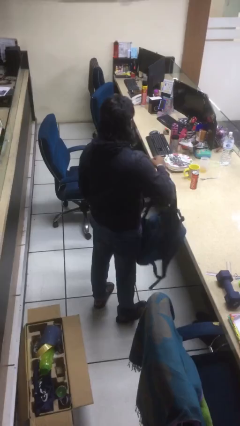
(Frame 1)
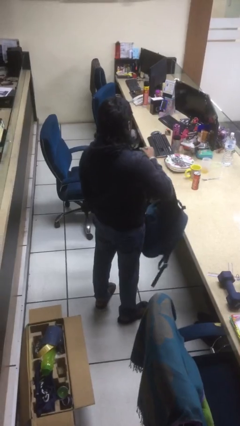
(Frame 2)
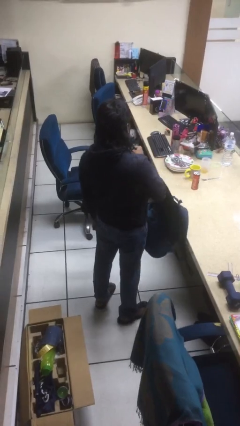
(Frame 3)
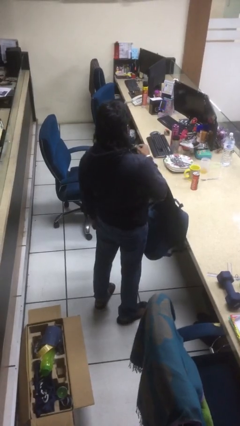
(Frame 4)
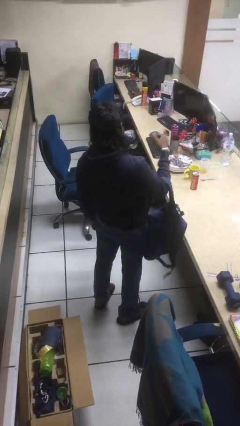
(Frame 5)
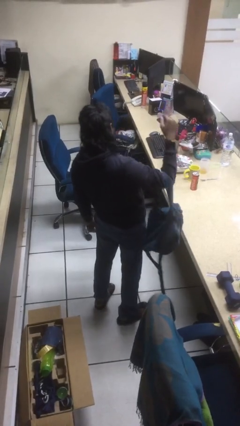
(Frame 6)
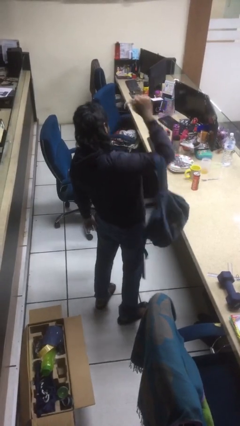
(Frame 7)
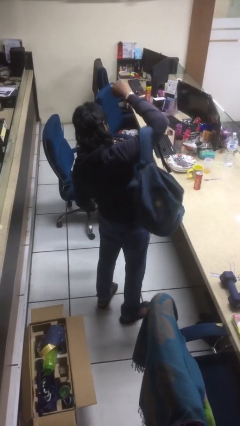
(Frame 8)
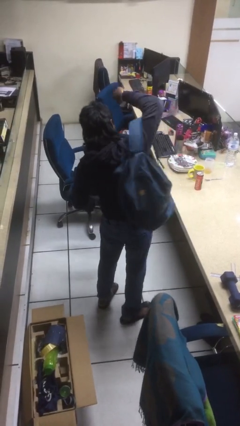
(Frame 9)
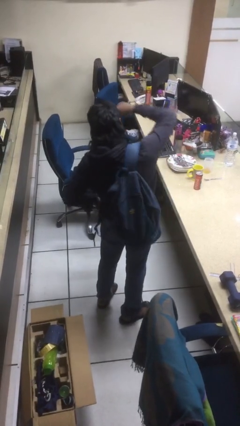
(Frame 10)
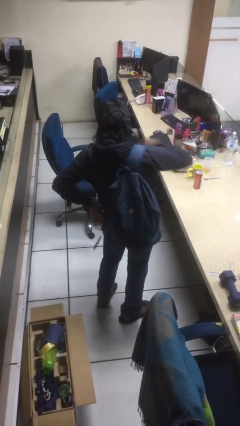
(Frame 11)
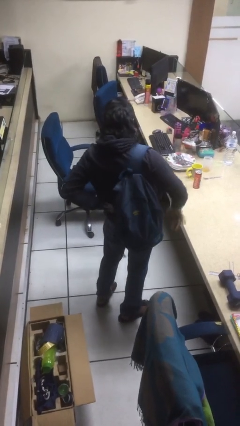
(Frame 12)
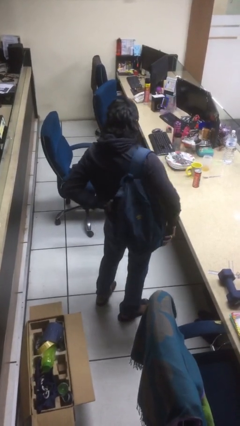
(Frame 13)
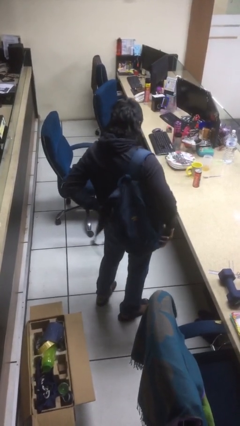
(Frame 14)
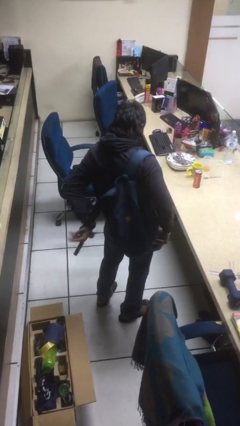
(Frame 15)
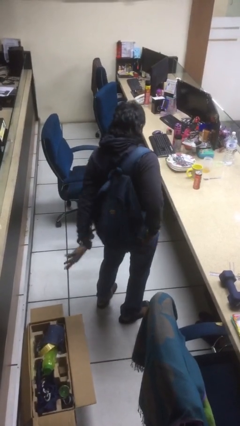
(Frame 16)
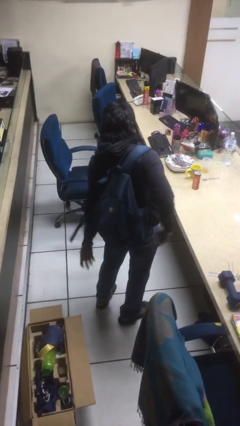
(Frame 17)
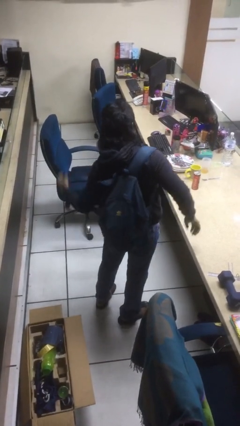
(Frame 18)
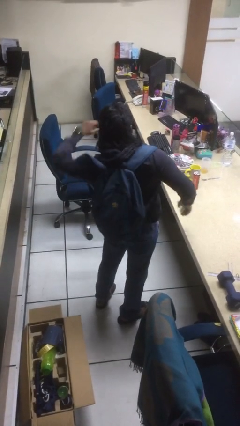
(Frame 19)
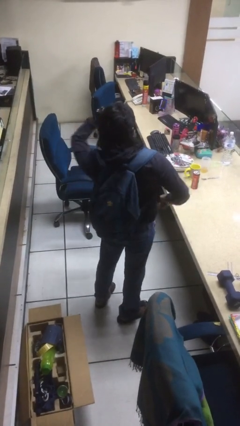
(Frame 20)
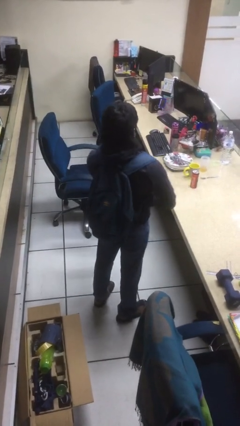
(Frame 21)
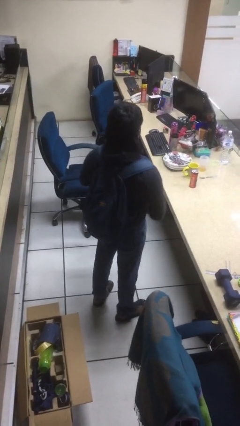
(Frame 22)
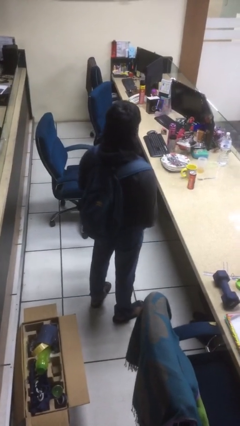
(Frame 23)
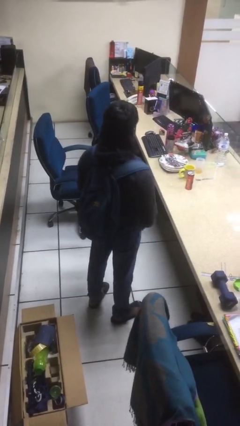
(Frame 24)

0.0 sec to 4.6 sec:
person puts on backpack

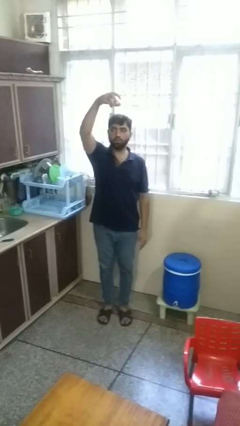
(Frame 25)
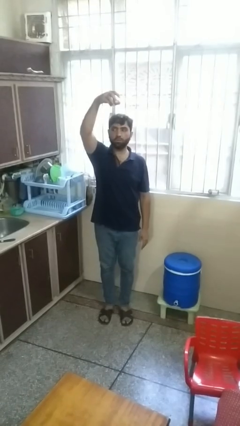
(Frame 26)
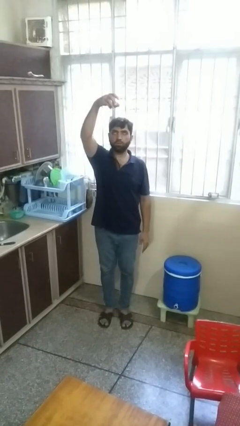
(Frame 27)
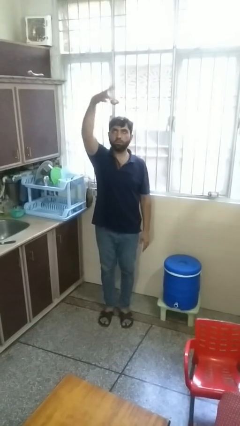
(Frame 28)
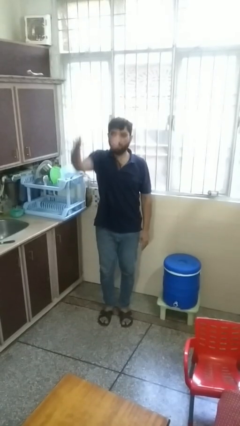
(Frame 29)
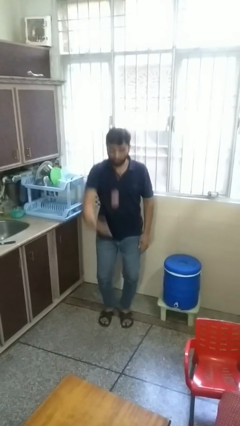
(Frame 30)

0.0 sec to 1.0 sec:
person drops object

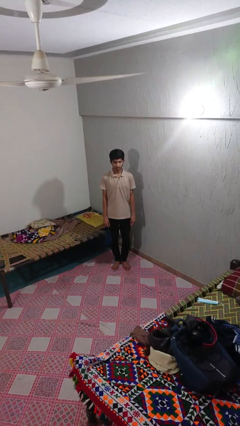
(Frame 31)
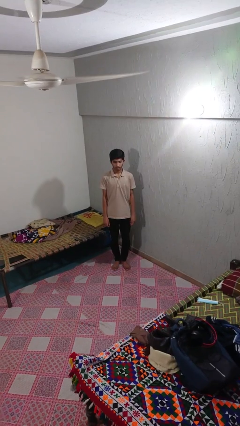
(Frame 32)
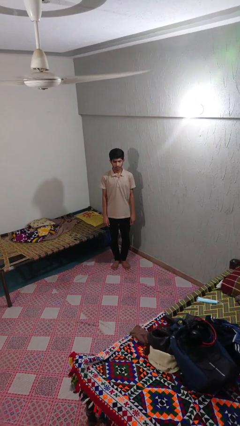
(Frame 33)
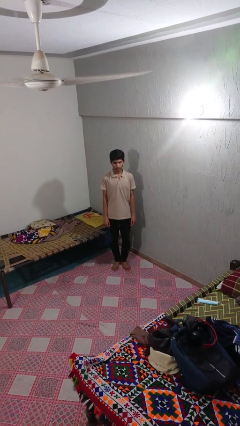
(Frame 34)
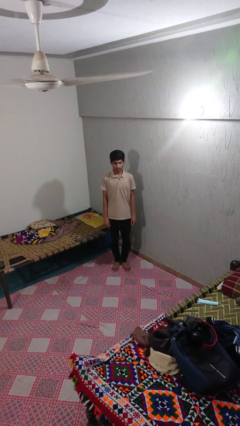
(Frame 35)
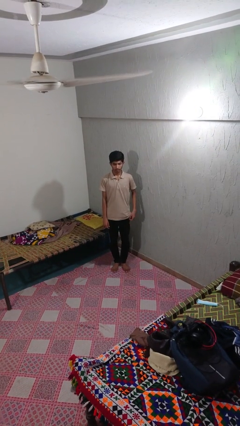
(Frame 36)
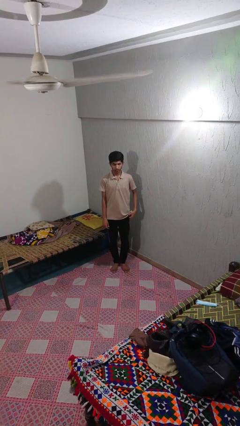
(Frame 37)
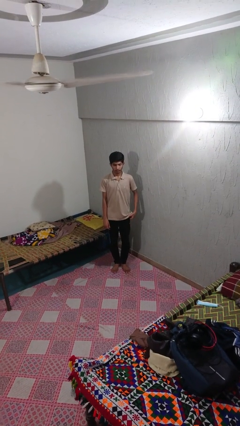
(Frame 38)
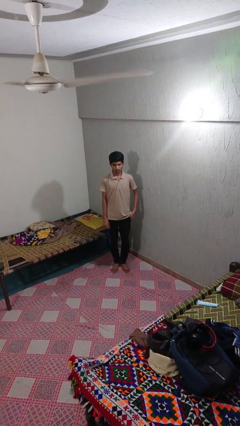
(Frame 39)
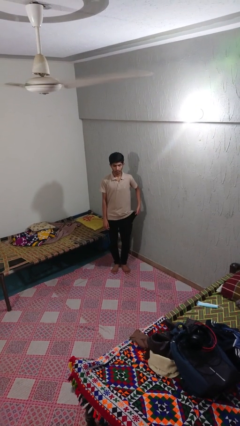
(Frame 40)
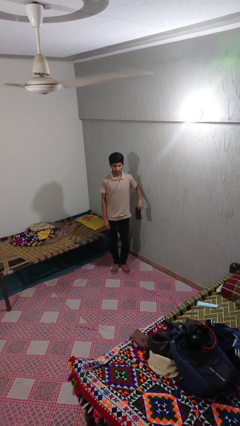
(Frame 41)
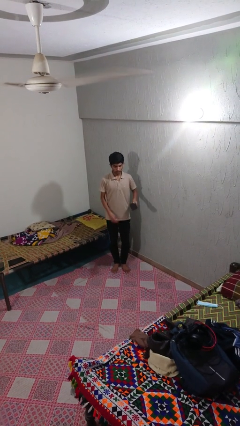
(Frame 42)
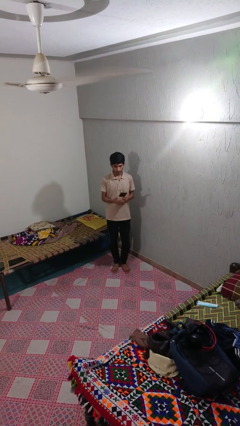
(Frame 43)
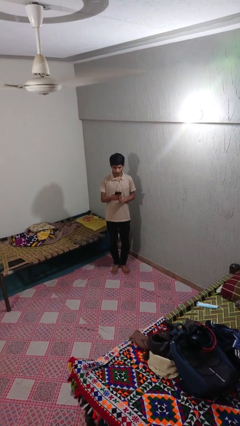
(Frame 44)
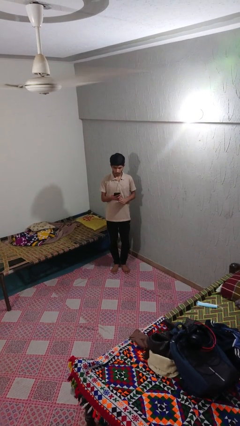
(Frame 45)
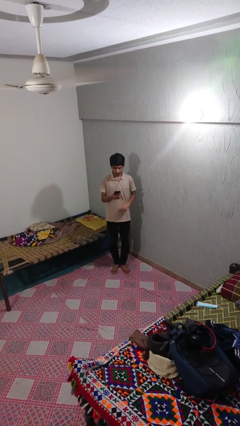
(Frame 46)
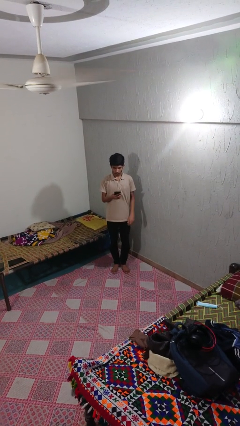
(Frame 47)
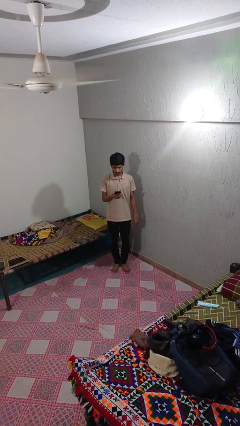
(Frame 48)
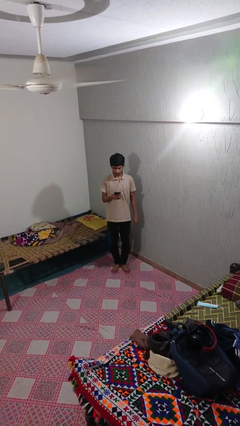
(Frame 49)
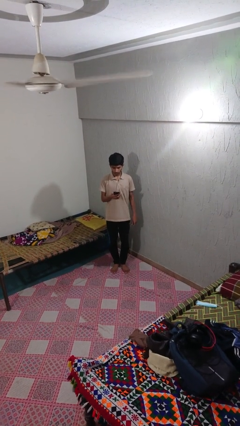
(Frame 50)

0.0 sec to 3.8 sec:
person takes phone from pocket

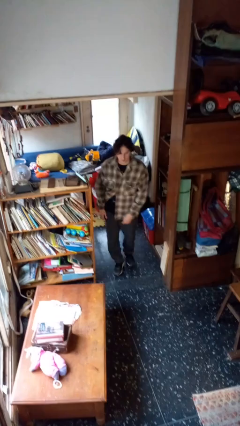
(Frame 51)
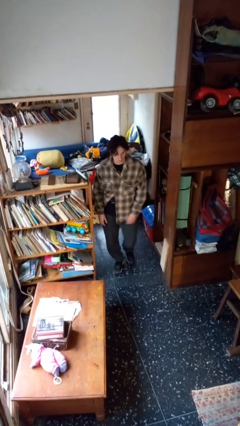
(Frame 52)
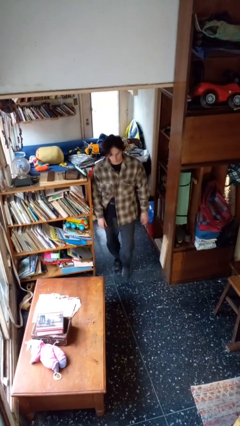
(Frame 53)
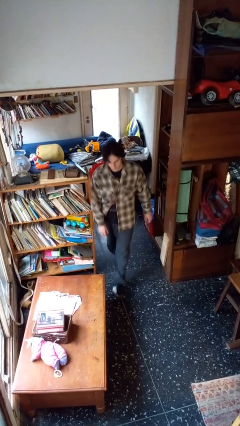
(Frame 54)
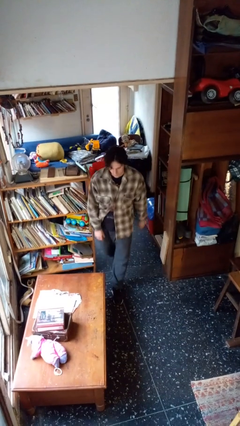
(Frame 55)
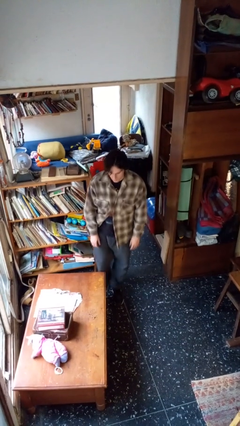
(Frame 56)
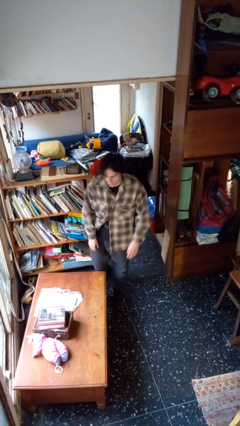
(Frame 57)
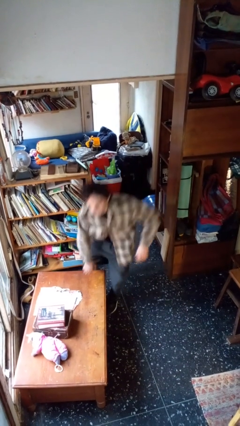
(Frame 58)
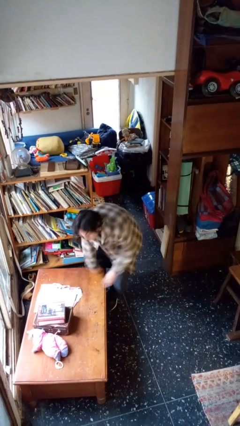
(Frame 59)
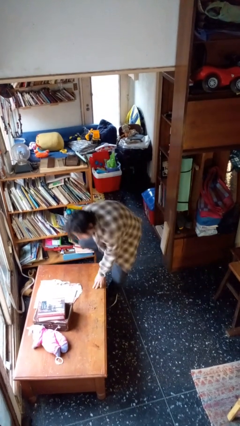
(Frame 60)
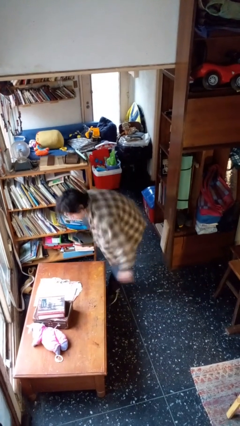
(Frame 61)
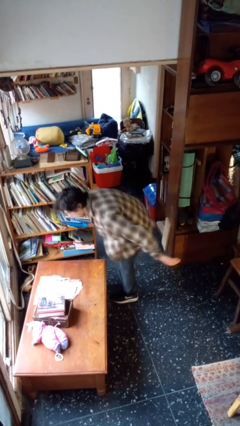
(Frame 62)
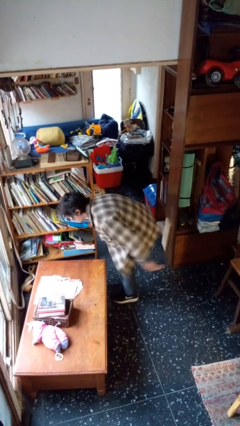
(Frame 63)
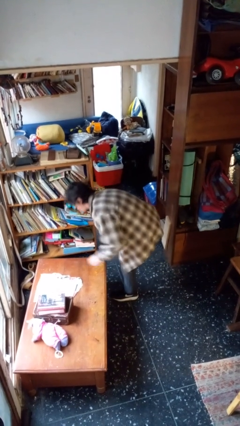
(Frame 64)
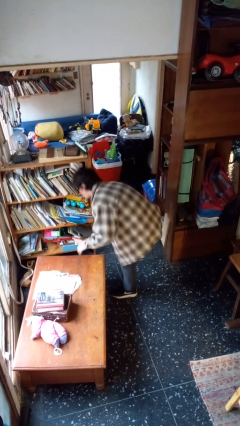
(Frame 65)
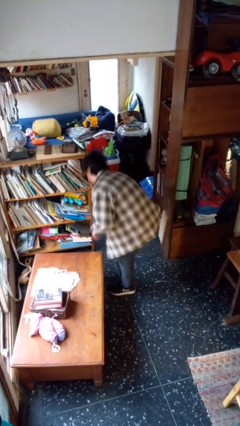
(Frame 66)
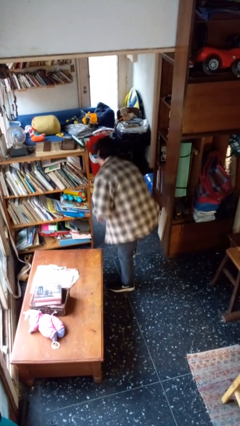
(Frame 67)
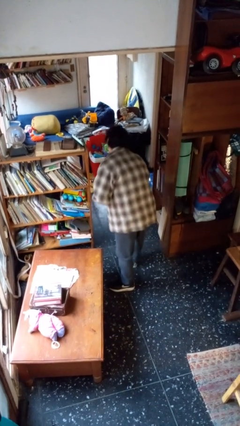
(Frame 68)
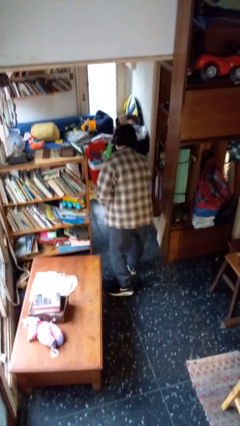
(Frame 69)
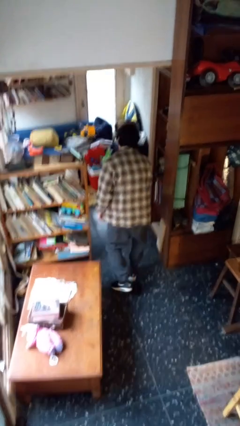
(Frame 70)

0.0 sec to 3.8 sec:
person bumps into table

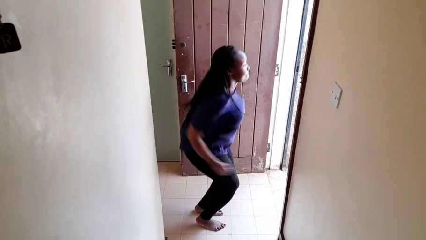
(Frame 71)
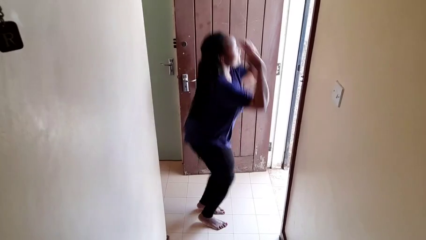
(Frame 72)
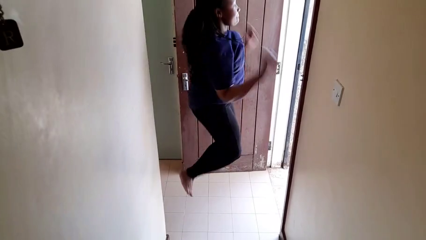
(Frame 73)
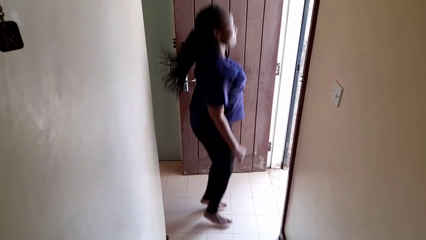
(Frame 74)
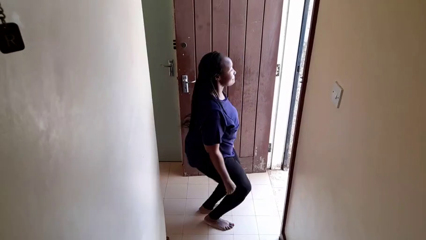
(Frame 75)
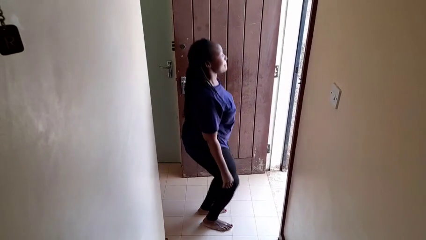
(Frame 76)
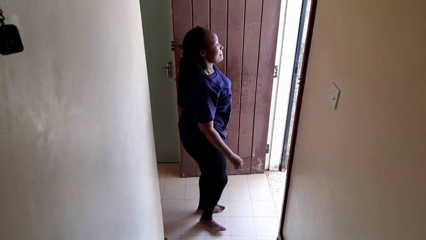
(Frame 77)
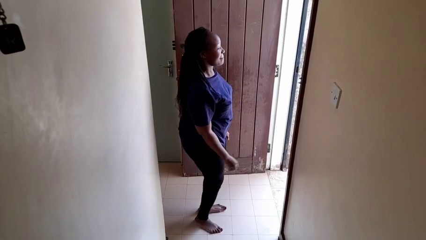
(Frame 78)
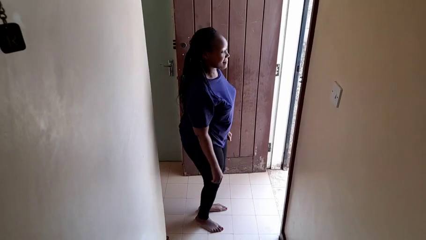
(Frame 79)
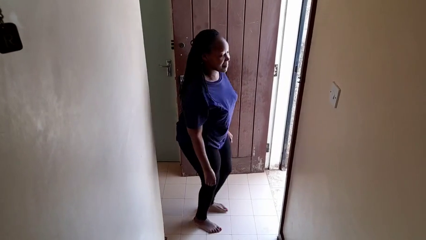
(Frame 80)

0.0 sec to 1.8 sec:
person jumps

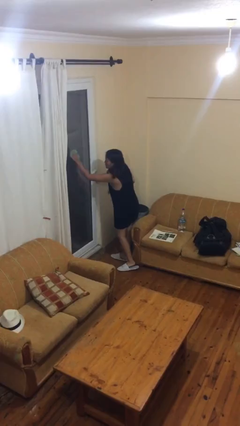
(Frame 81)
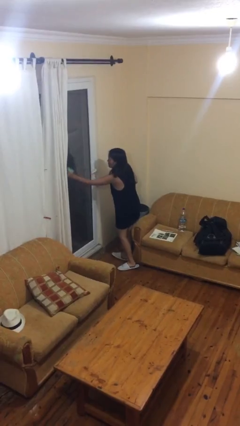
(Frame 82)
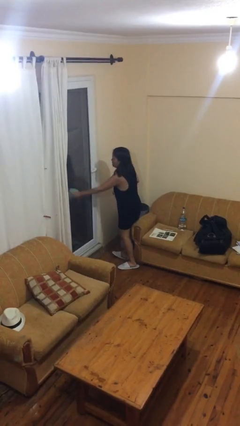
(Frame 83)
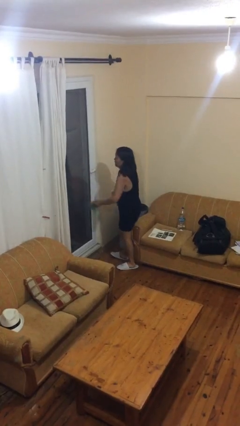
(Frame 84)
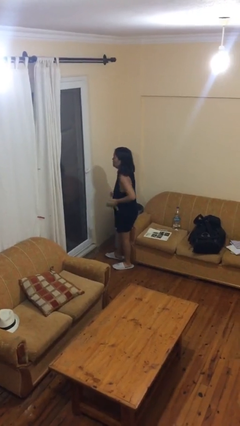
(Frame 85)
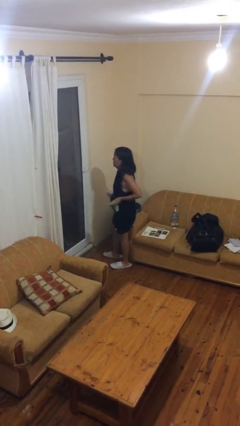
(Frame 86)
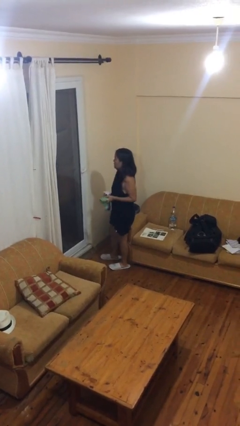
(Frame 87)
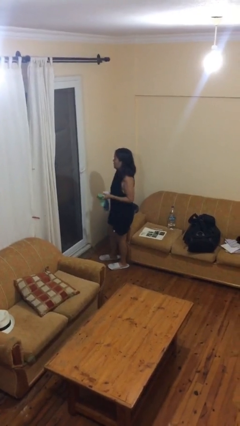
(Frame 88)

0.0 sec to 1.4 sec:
person washes window

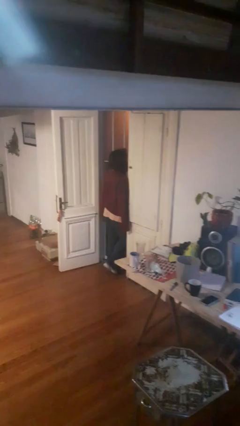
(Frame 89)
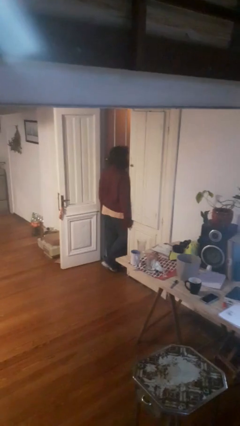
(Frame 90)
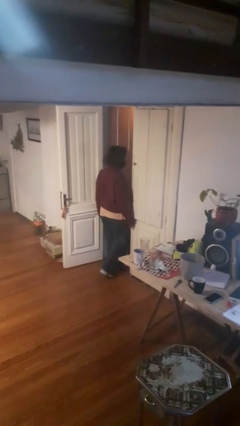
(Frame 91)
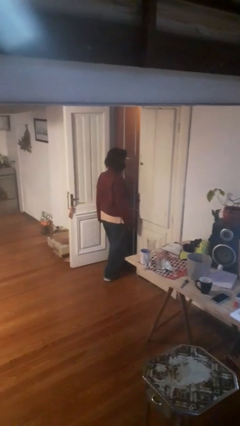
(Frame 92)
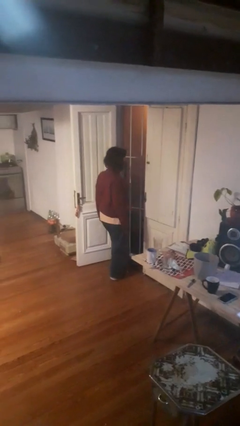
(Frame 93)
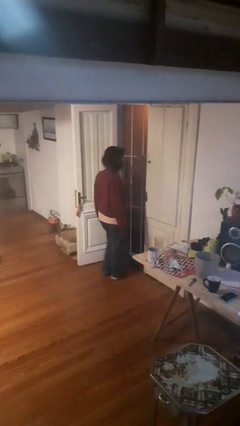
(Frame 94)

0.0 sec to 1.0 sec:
person bumps into wall
